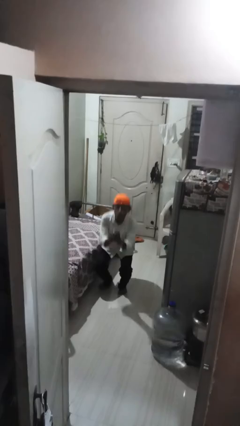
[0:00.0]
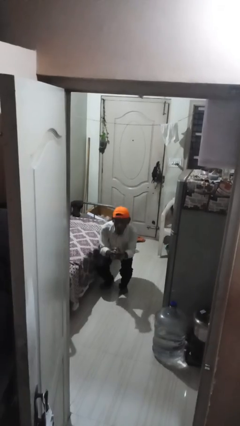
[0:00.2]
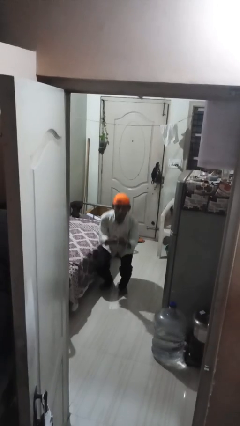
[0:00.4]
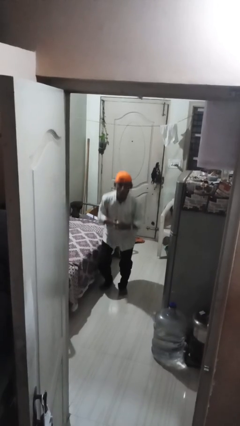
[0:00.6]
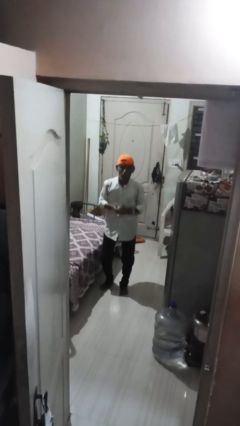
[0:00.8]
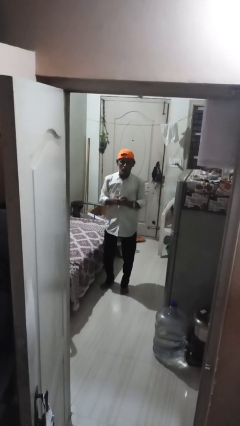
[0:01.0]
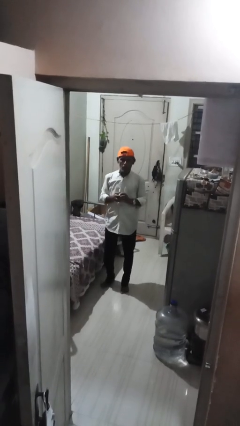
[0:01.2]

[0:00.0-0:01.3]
person catches dropped object

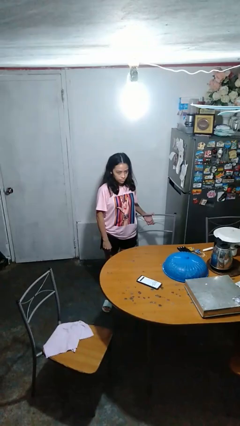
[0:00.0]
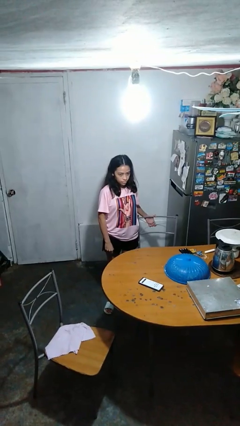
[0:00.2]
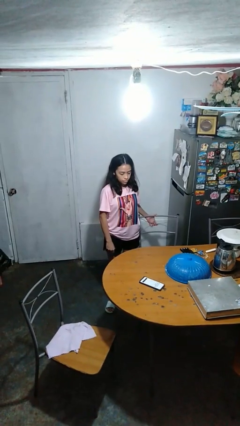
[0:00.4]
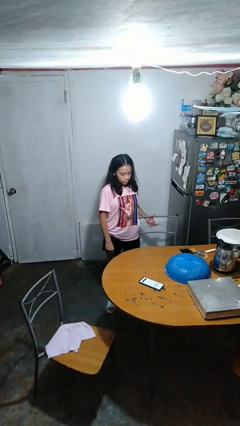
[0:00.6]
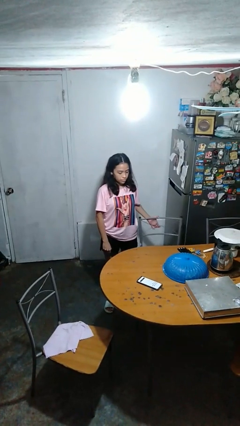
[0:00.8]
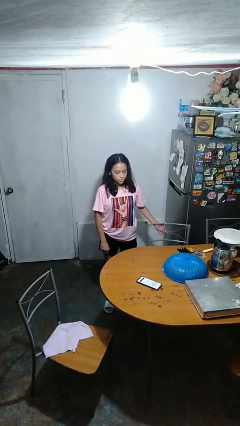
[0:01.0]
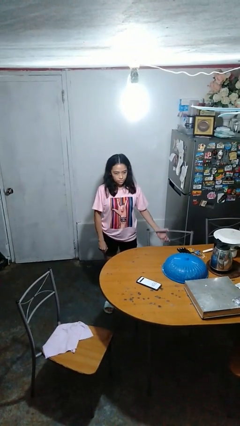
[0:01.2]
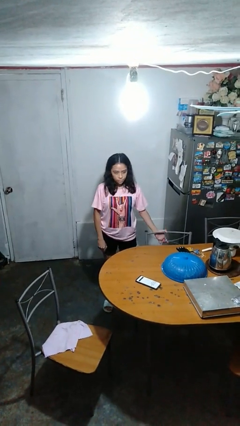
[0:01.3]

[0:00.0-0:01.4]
person pushes in chair

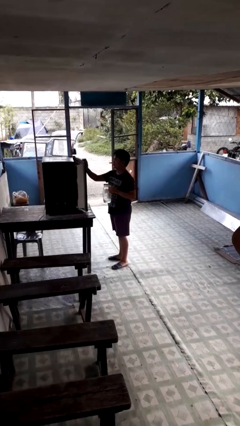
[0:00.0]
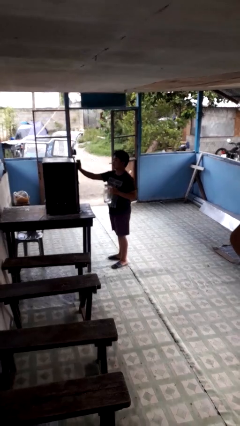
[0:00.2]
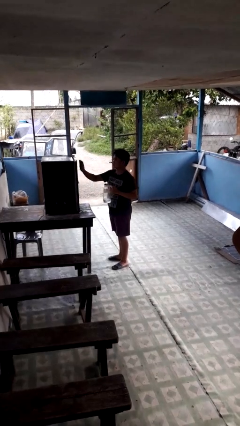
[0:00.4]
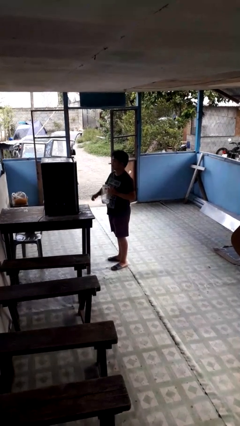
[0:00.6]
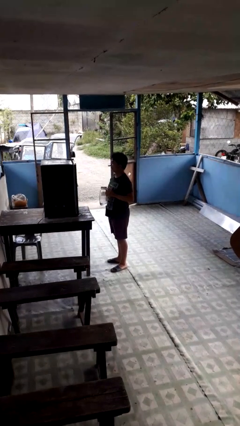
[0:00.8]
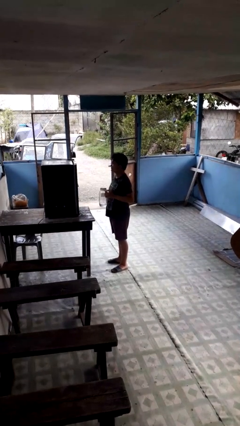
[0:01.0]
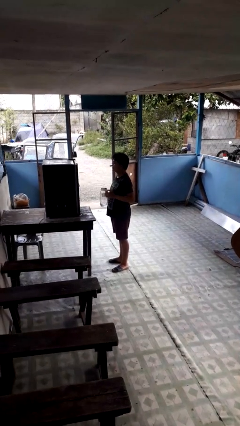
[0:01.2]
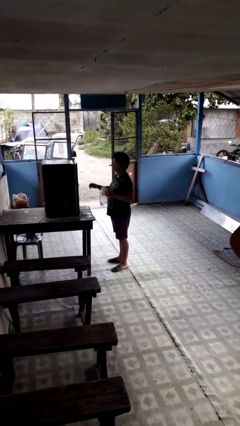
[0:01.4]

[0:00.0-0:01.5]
person closes refrigerator

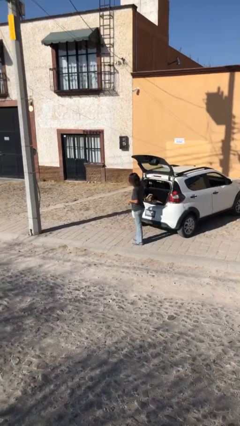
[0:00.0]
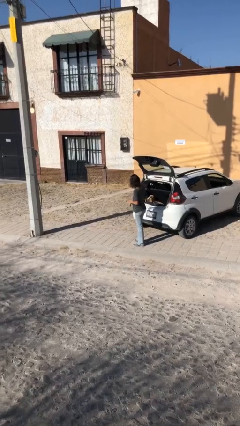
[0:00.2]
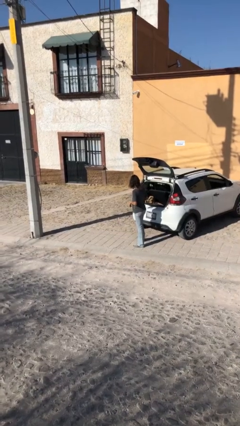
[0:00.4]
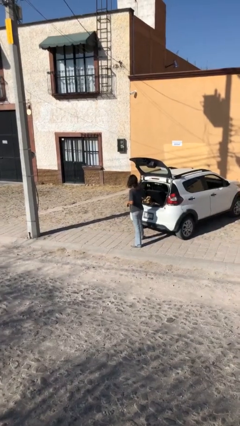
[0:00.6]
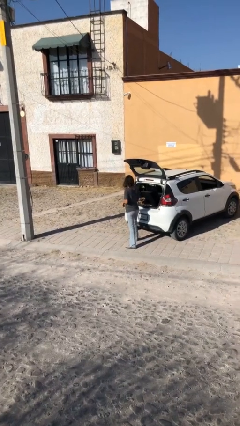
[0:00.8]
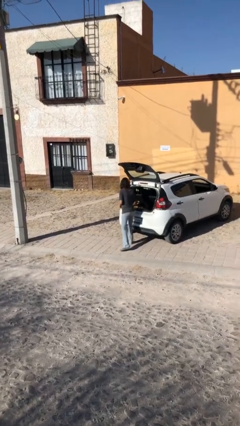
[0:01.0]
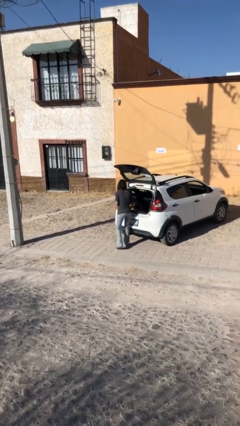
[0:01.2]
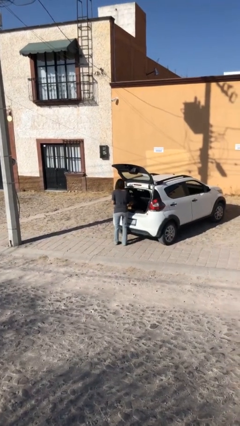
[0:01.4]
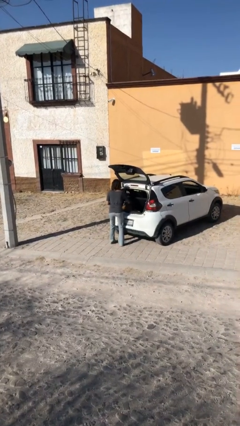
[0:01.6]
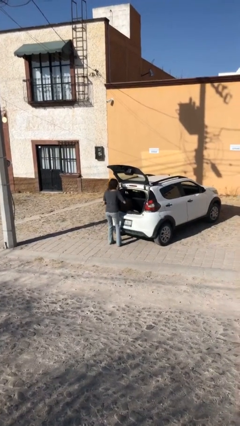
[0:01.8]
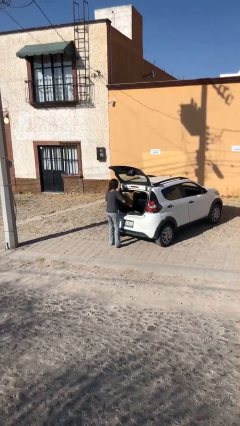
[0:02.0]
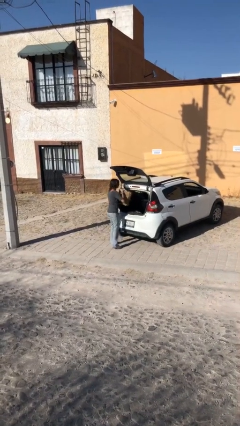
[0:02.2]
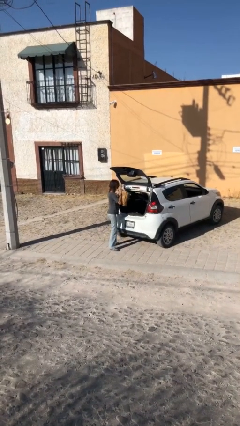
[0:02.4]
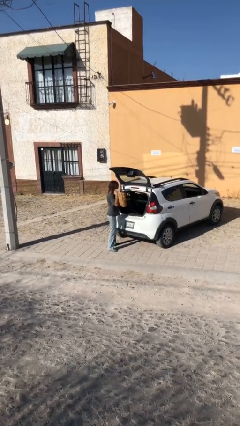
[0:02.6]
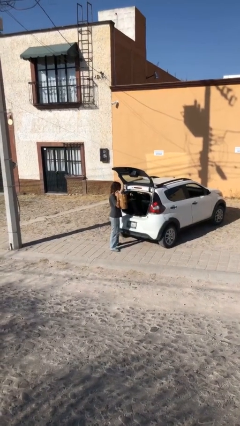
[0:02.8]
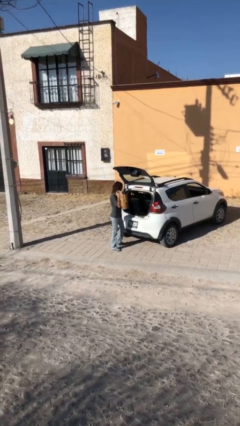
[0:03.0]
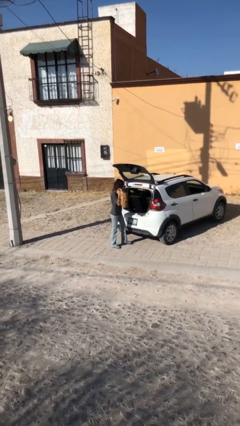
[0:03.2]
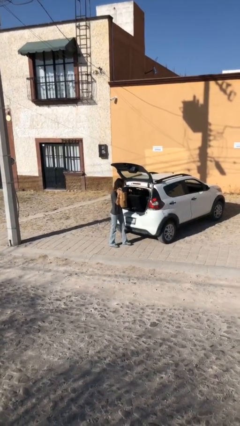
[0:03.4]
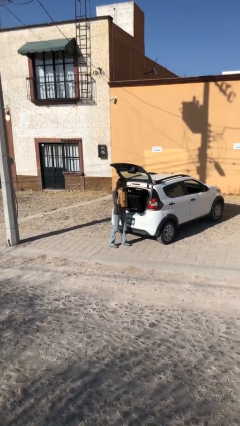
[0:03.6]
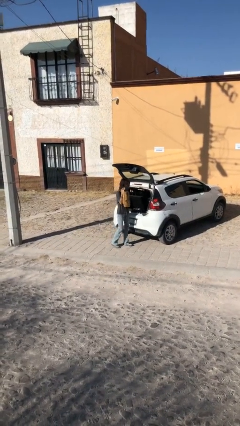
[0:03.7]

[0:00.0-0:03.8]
person unloads car

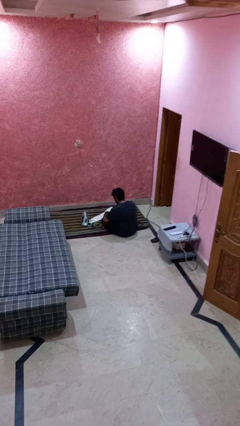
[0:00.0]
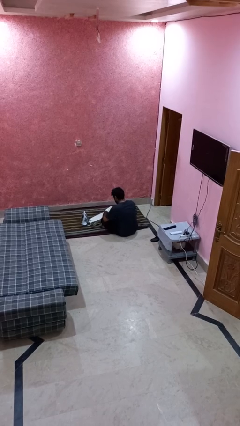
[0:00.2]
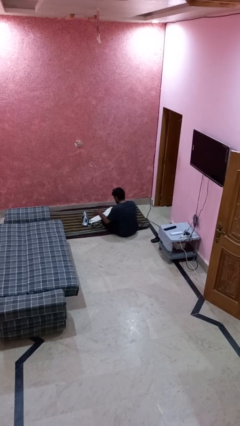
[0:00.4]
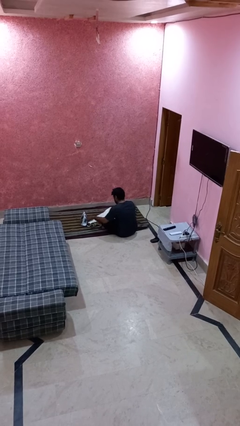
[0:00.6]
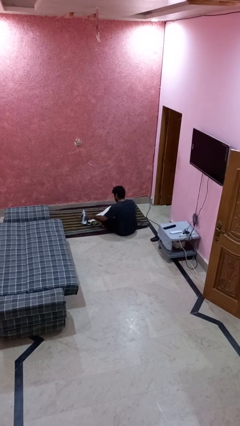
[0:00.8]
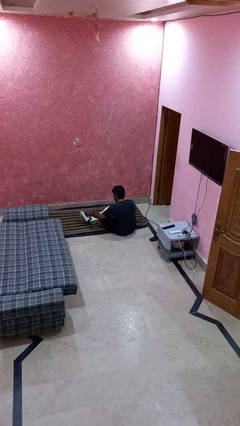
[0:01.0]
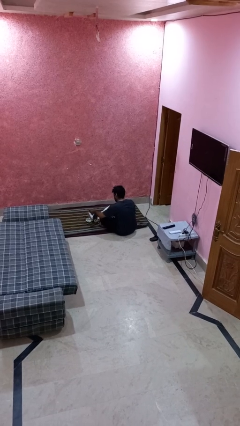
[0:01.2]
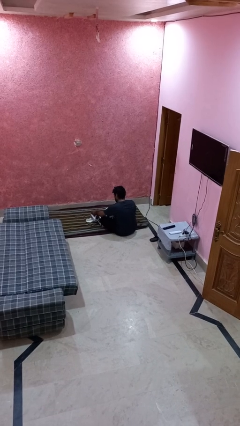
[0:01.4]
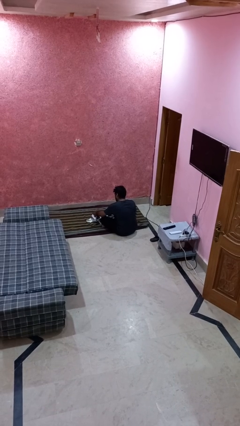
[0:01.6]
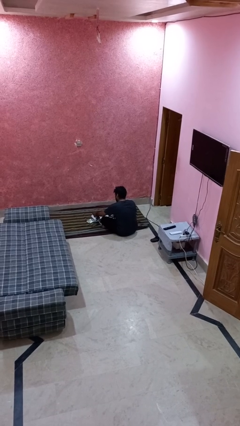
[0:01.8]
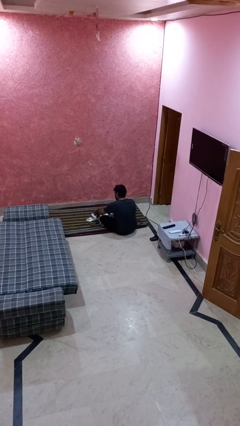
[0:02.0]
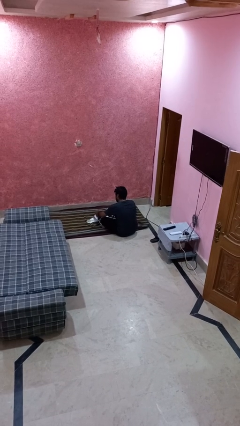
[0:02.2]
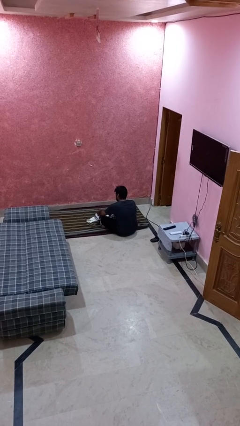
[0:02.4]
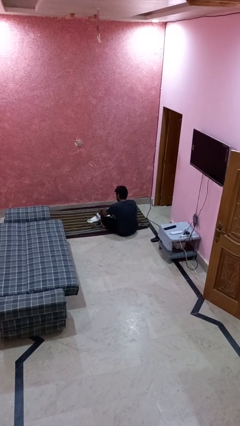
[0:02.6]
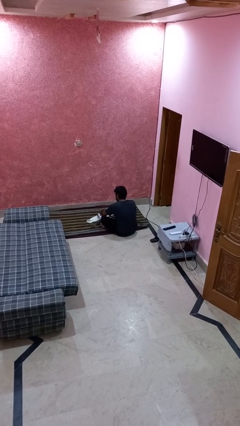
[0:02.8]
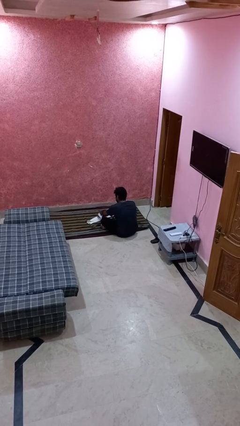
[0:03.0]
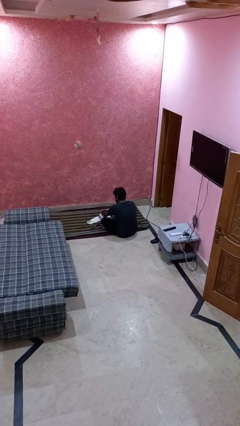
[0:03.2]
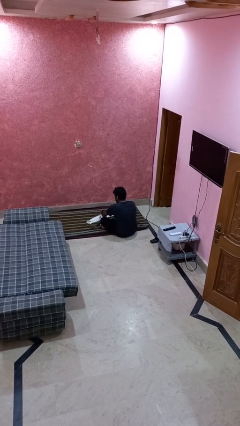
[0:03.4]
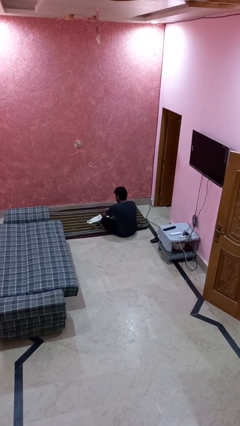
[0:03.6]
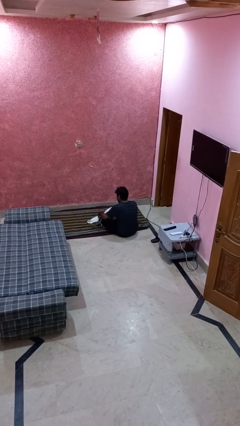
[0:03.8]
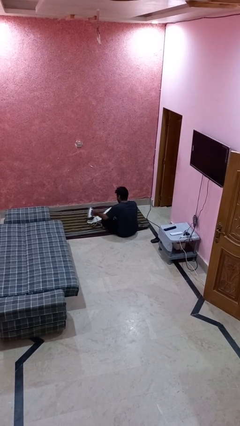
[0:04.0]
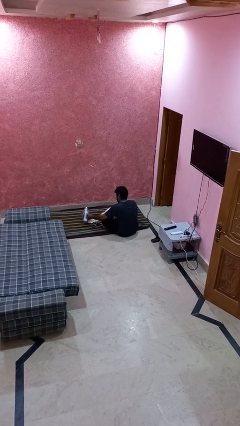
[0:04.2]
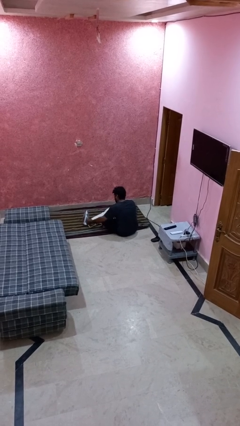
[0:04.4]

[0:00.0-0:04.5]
person irons clothes

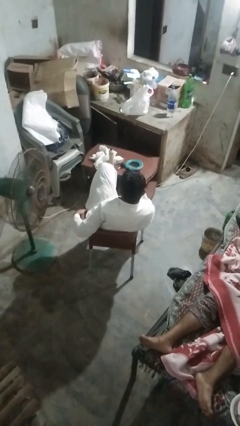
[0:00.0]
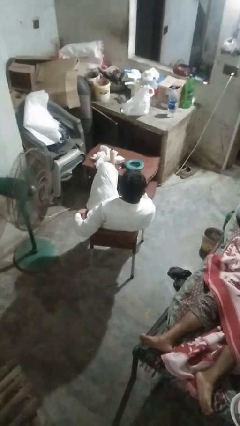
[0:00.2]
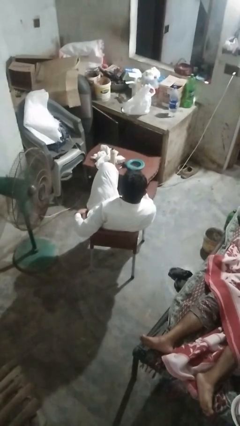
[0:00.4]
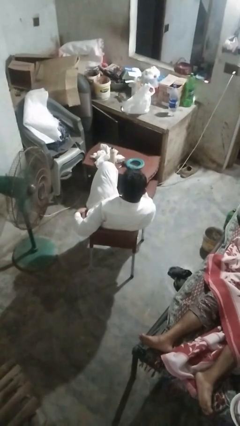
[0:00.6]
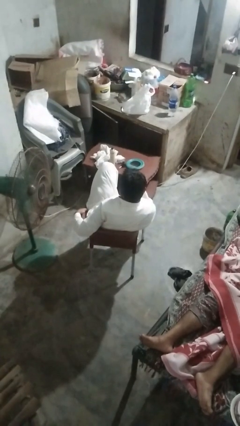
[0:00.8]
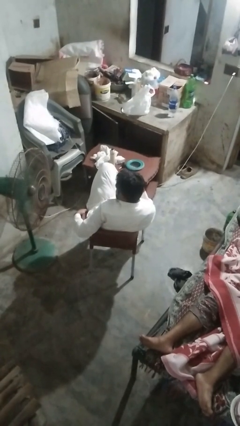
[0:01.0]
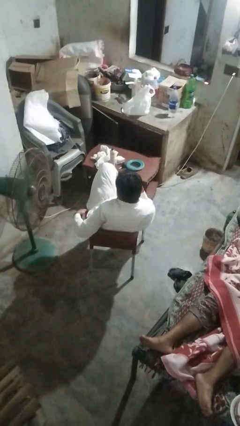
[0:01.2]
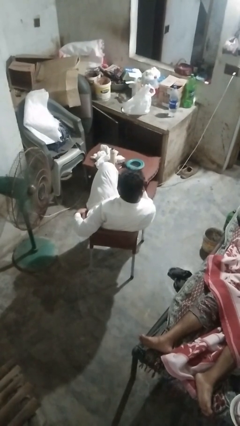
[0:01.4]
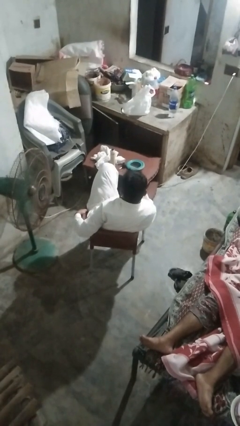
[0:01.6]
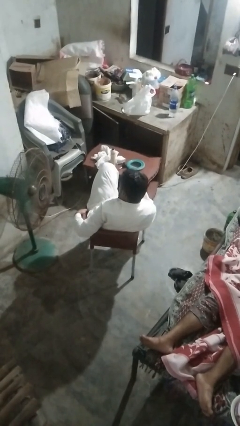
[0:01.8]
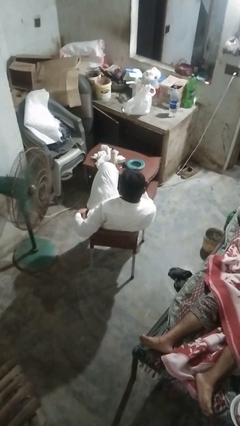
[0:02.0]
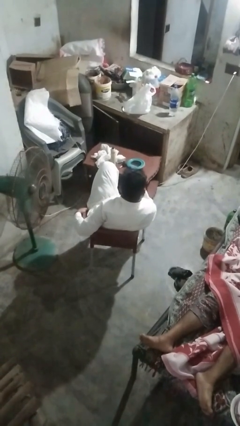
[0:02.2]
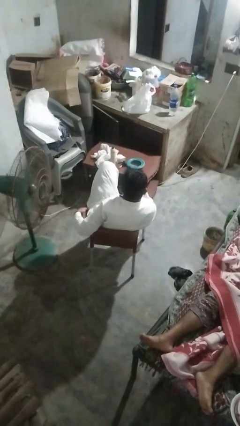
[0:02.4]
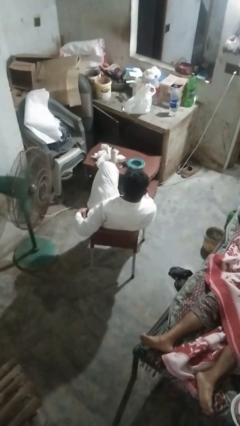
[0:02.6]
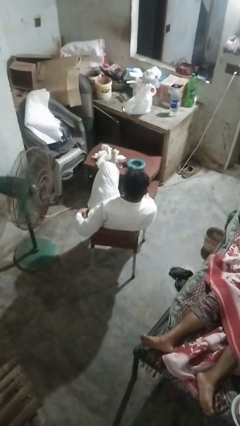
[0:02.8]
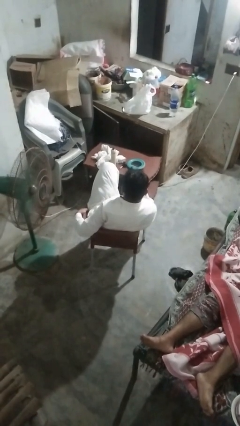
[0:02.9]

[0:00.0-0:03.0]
person shakes head

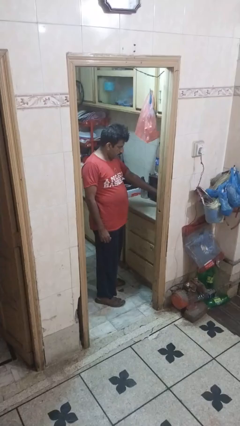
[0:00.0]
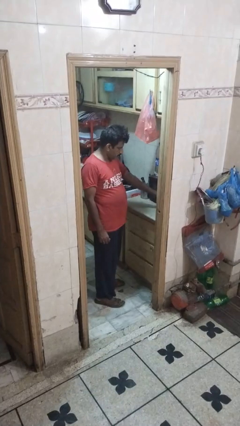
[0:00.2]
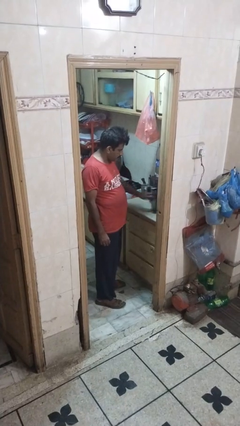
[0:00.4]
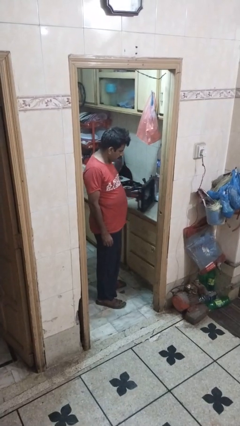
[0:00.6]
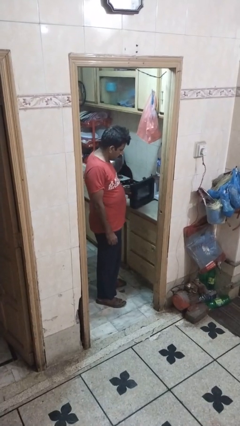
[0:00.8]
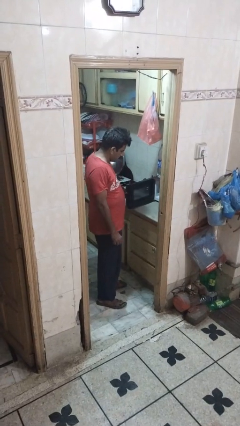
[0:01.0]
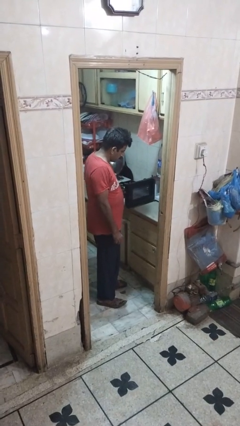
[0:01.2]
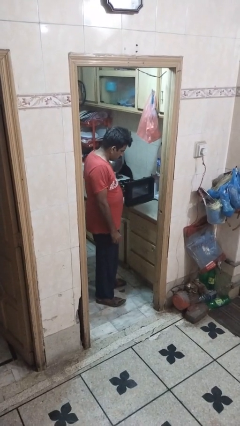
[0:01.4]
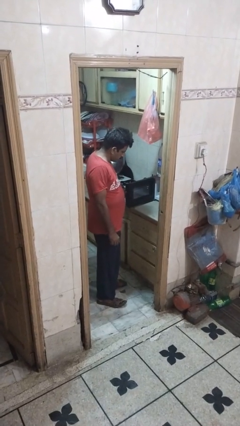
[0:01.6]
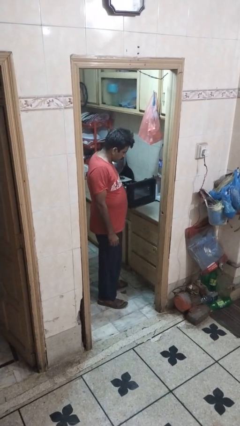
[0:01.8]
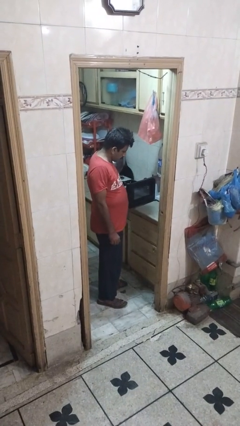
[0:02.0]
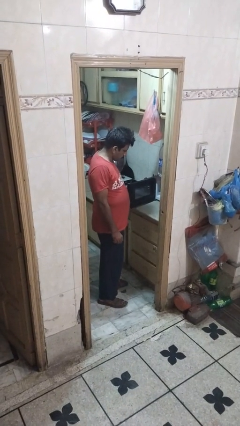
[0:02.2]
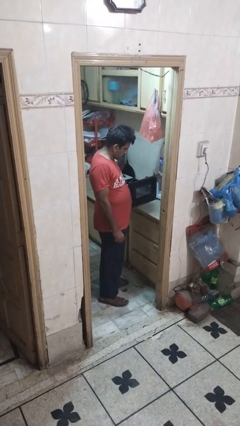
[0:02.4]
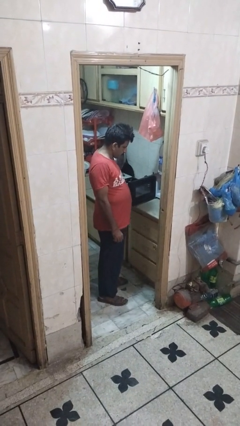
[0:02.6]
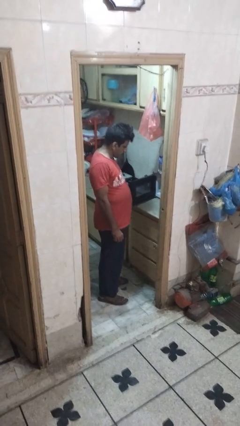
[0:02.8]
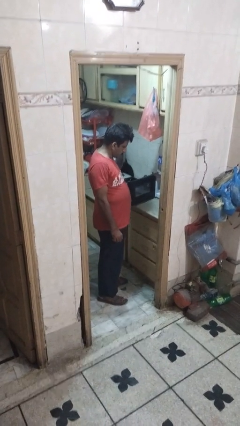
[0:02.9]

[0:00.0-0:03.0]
person opens oven door
